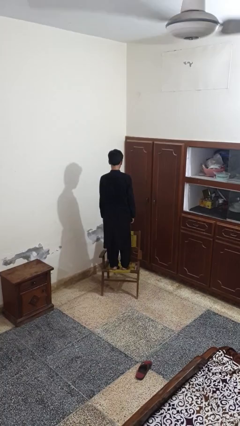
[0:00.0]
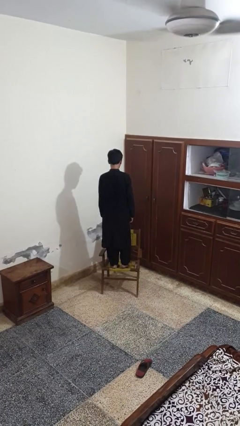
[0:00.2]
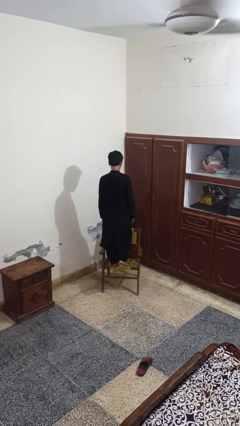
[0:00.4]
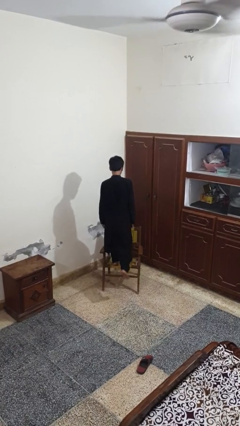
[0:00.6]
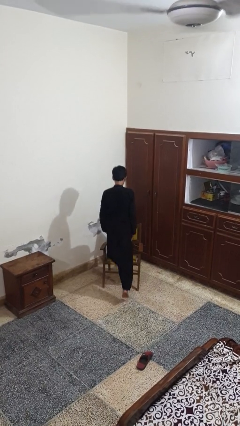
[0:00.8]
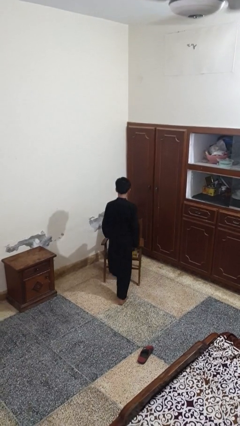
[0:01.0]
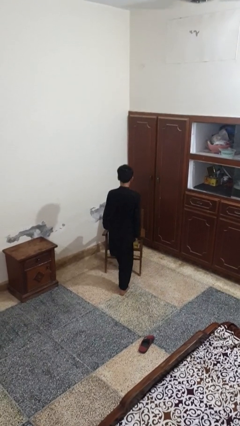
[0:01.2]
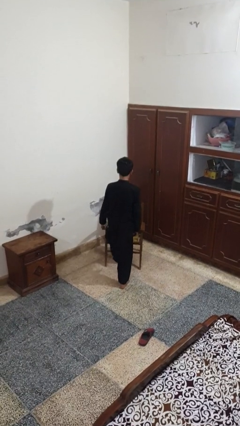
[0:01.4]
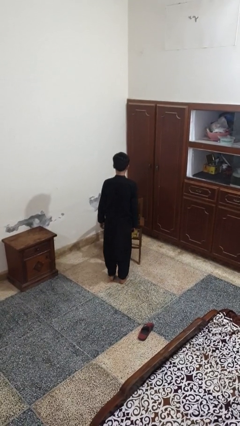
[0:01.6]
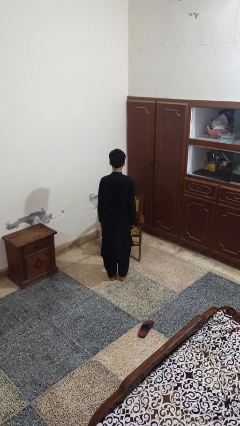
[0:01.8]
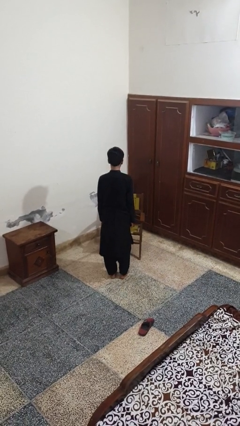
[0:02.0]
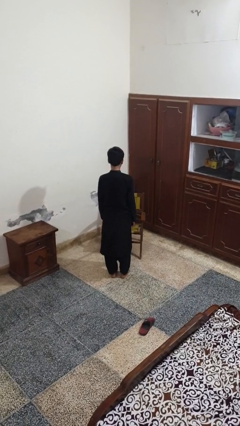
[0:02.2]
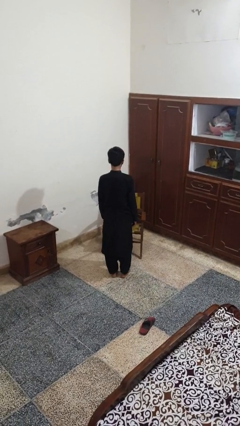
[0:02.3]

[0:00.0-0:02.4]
person climbs off chair

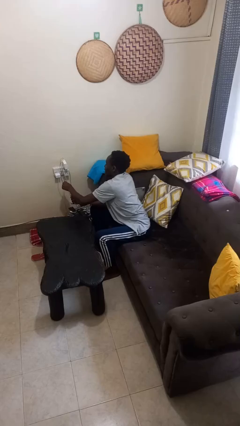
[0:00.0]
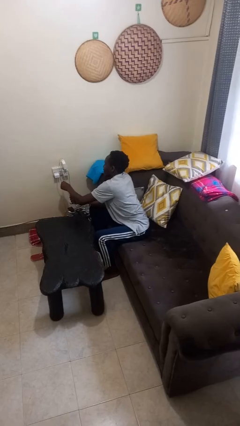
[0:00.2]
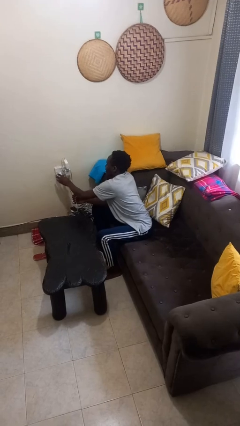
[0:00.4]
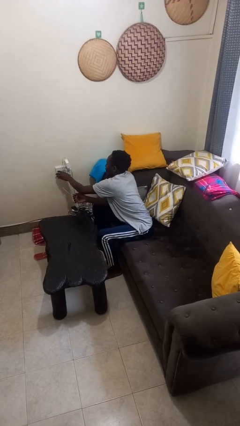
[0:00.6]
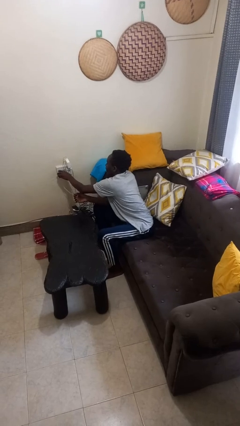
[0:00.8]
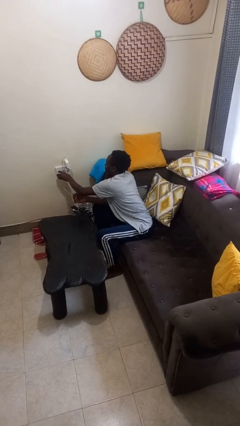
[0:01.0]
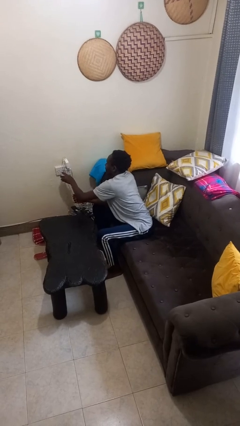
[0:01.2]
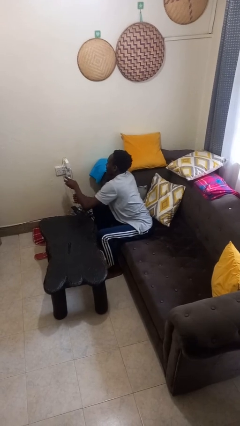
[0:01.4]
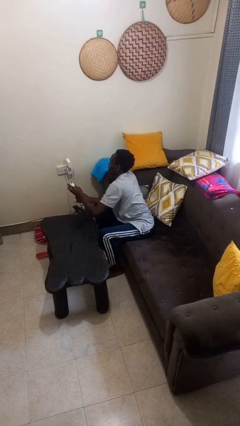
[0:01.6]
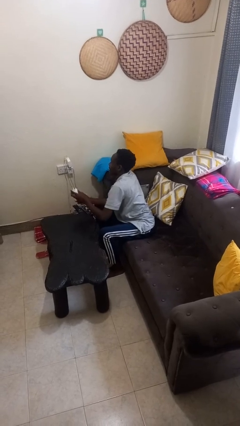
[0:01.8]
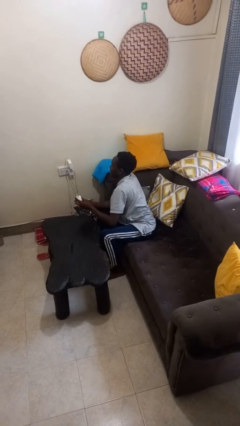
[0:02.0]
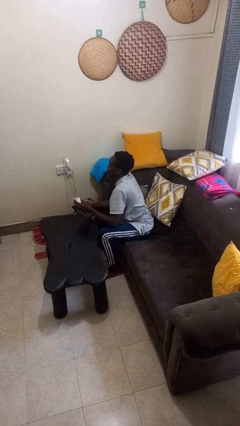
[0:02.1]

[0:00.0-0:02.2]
person unplugs from electrical socket

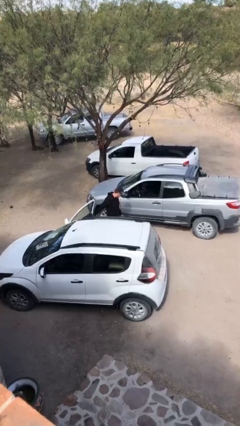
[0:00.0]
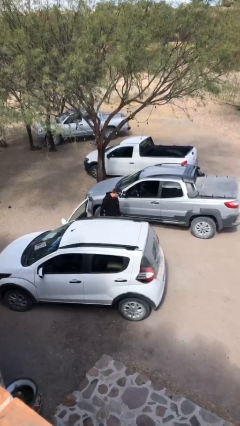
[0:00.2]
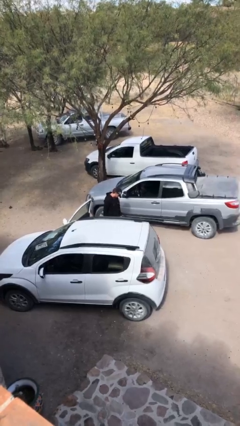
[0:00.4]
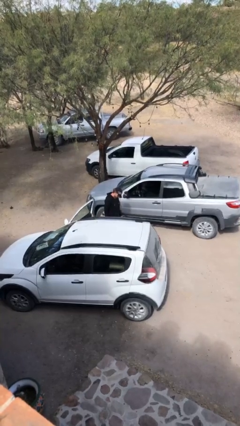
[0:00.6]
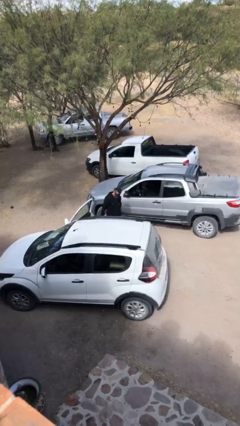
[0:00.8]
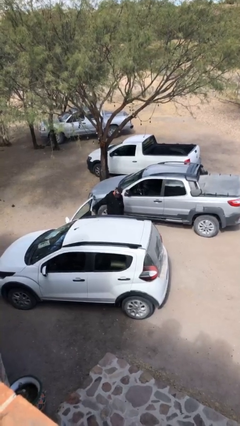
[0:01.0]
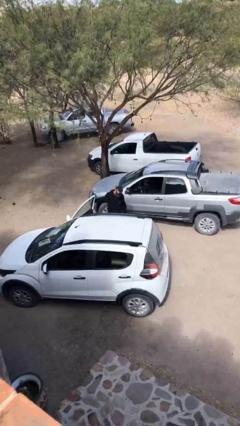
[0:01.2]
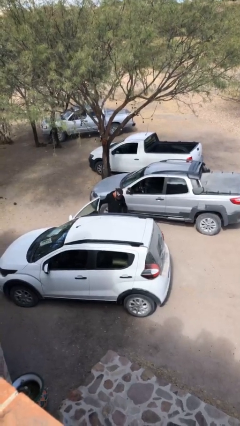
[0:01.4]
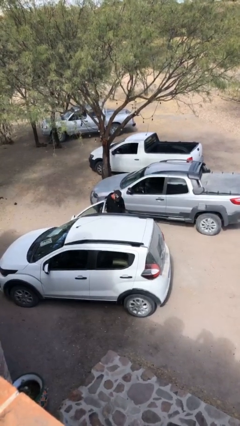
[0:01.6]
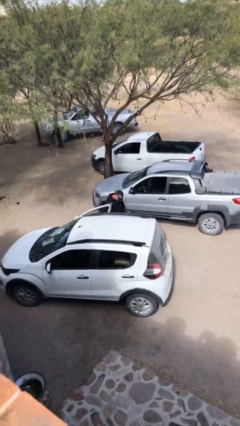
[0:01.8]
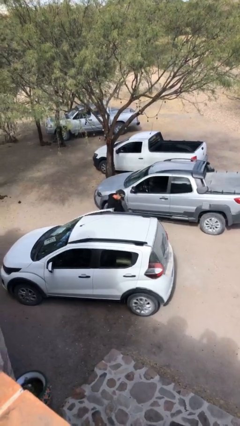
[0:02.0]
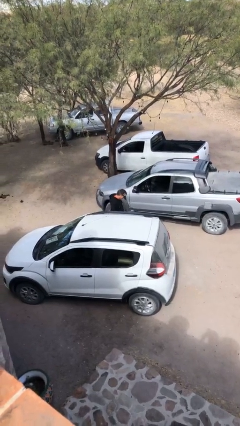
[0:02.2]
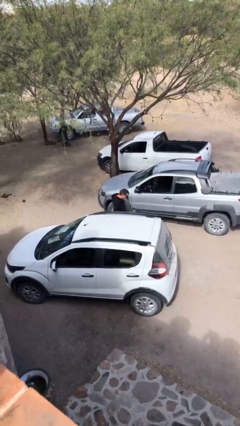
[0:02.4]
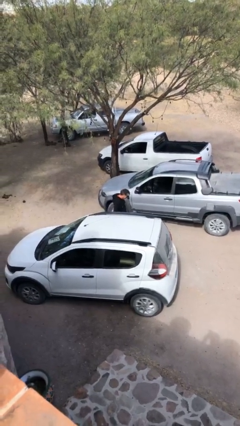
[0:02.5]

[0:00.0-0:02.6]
person closes car door

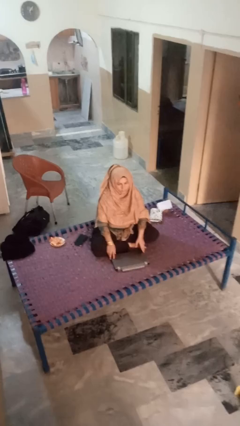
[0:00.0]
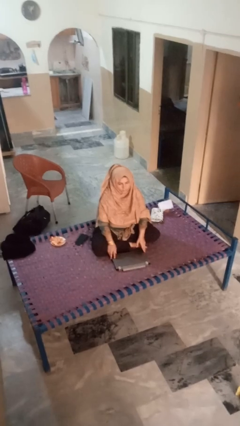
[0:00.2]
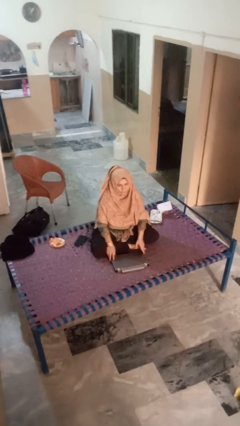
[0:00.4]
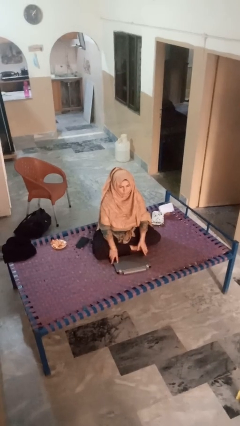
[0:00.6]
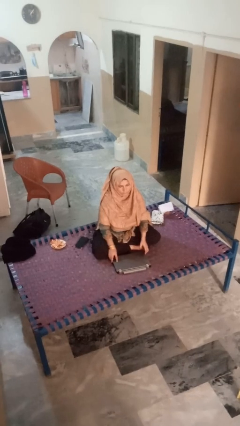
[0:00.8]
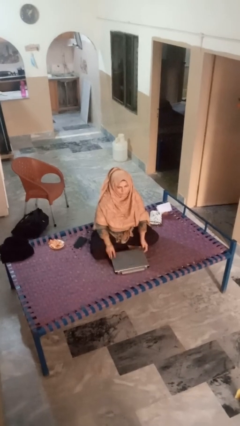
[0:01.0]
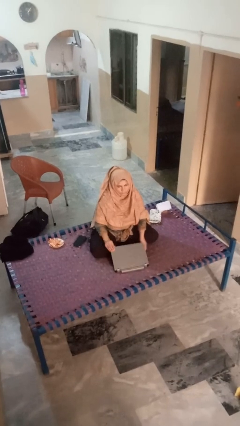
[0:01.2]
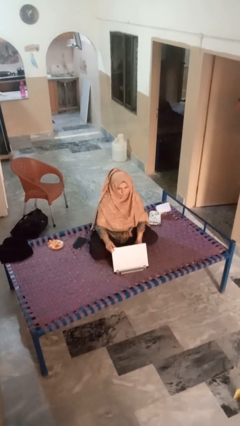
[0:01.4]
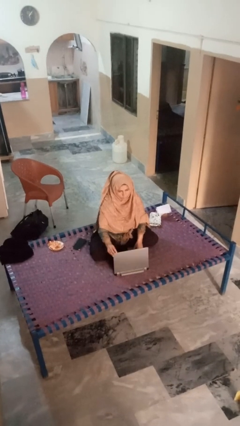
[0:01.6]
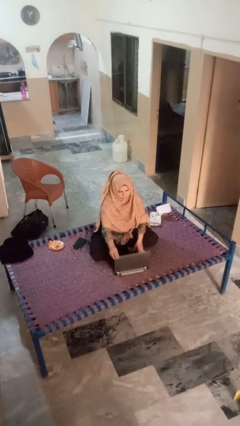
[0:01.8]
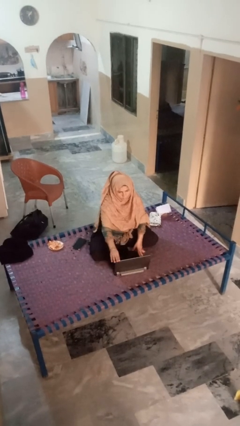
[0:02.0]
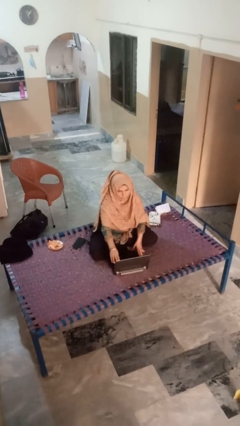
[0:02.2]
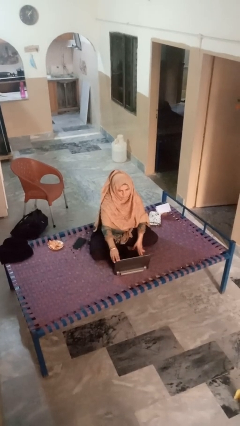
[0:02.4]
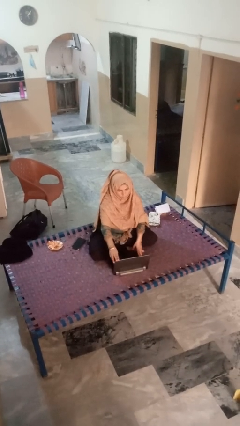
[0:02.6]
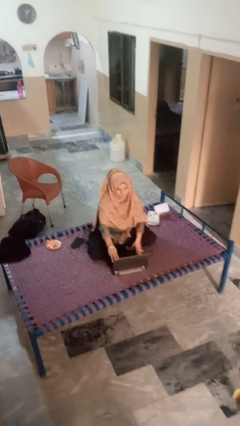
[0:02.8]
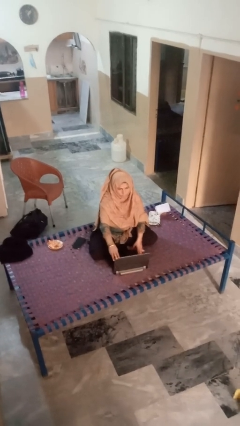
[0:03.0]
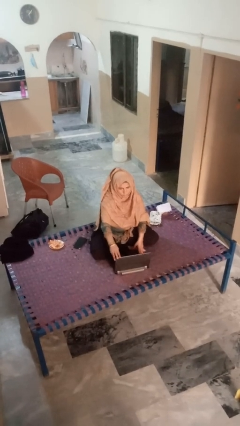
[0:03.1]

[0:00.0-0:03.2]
person opens laptop

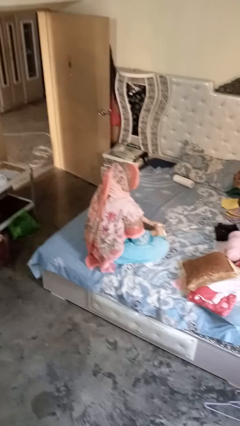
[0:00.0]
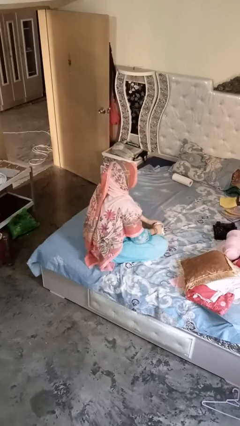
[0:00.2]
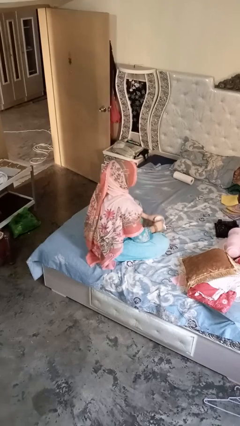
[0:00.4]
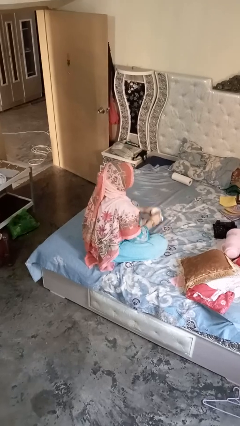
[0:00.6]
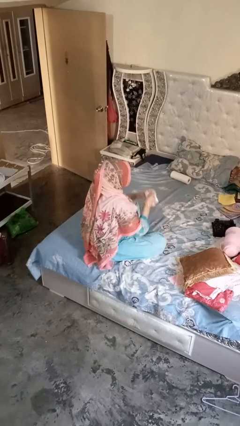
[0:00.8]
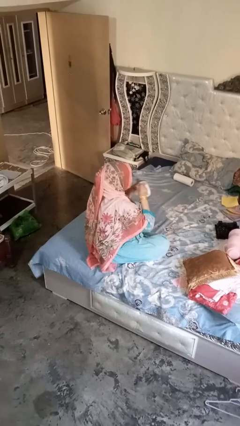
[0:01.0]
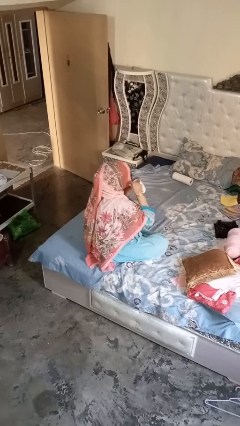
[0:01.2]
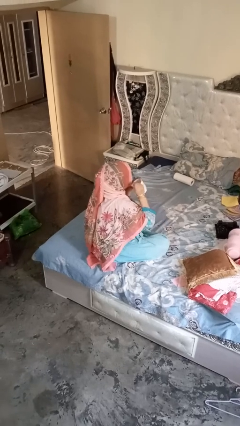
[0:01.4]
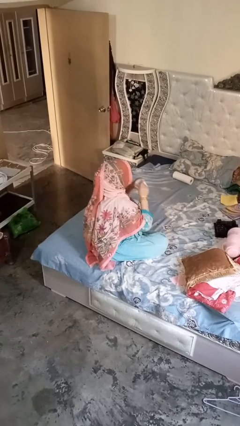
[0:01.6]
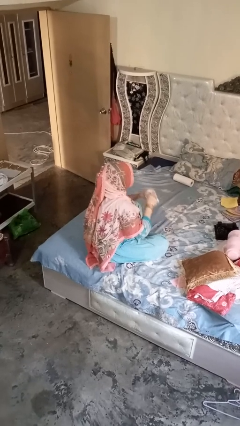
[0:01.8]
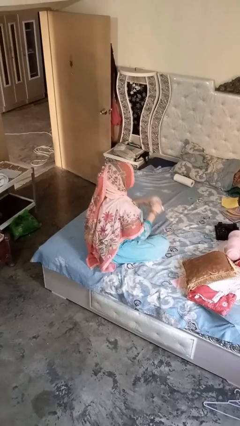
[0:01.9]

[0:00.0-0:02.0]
person drinks from mug

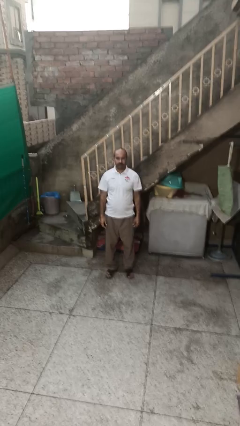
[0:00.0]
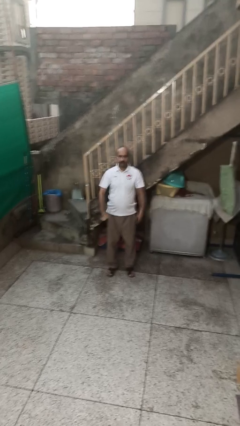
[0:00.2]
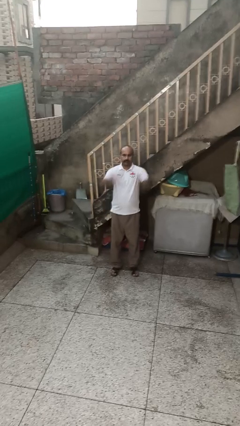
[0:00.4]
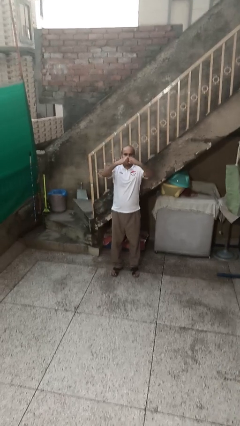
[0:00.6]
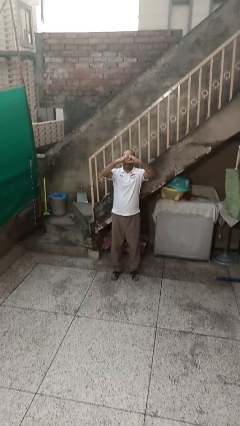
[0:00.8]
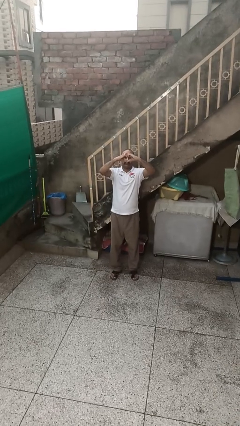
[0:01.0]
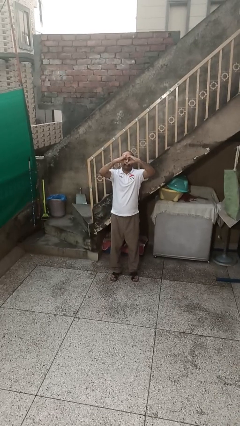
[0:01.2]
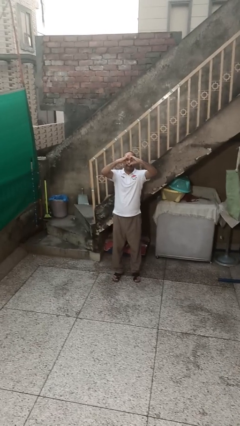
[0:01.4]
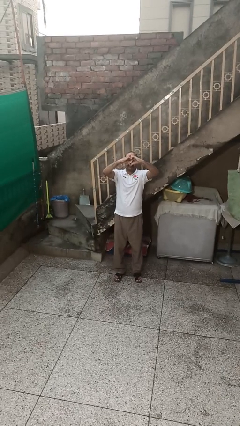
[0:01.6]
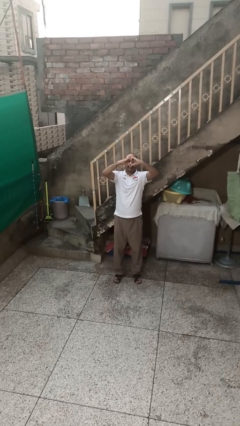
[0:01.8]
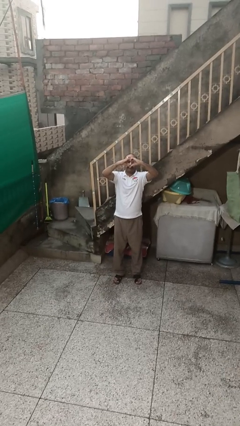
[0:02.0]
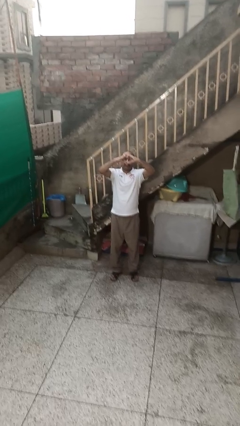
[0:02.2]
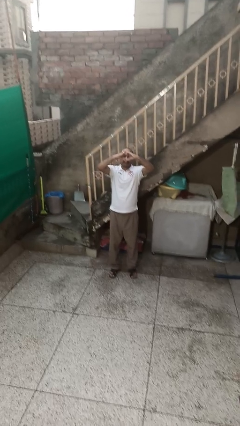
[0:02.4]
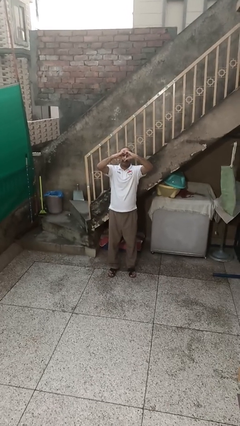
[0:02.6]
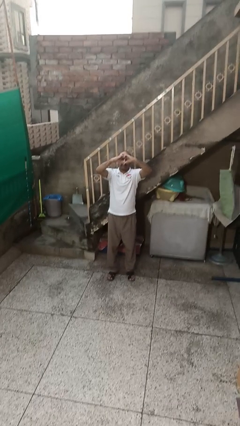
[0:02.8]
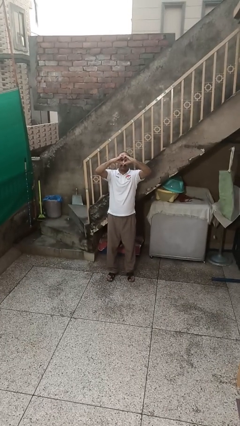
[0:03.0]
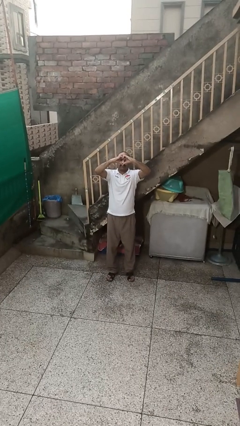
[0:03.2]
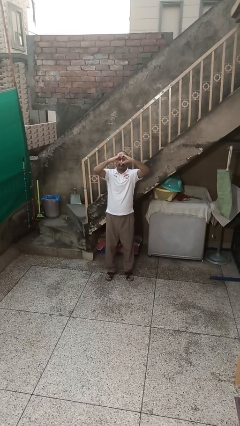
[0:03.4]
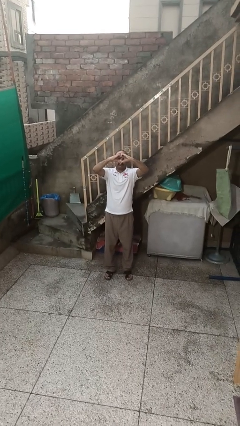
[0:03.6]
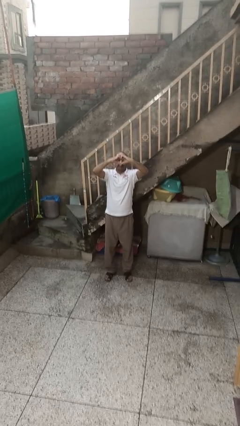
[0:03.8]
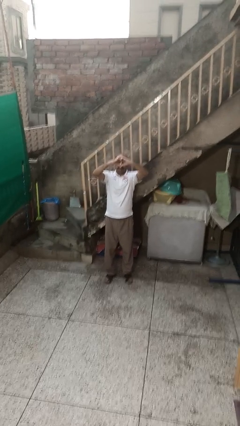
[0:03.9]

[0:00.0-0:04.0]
person gestures heart

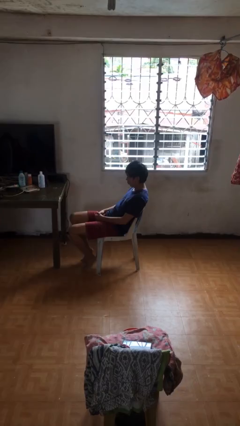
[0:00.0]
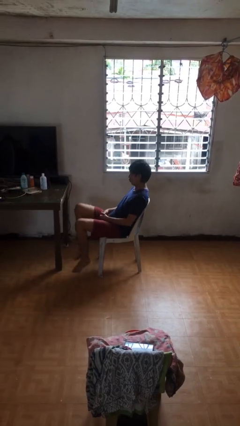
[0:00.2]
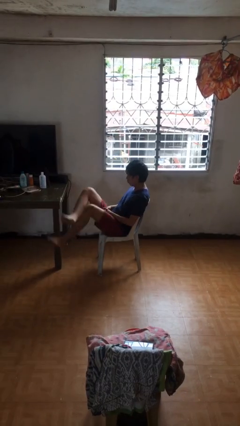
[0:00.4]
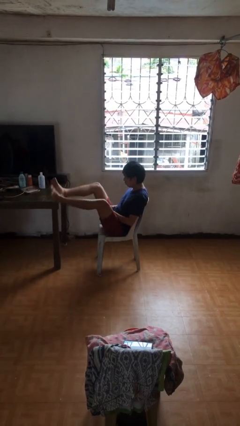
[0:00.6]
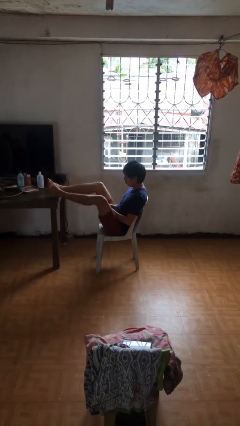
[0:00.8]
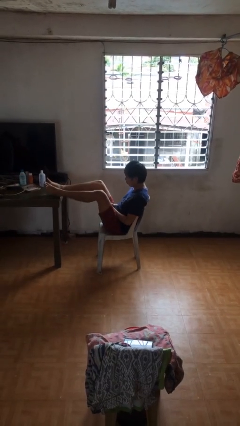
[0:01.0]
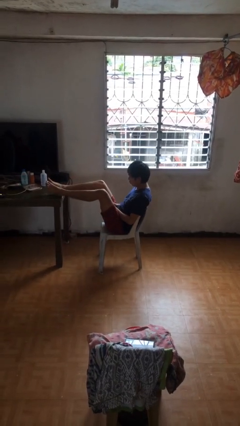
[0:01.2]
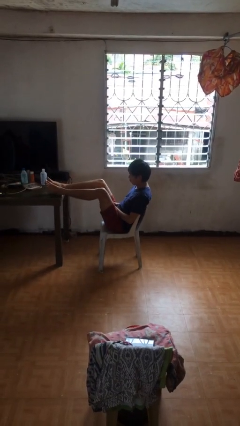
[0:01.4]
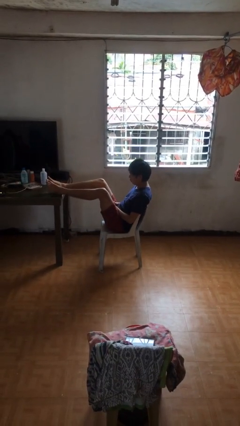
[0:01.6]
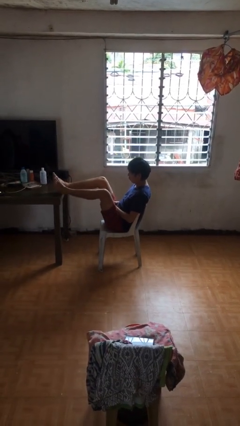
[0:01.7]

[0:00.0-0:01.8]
person puts feet up
